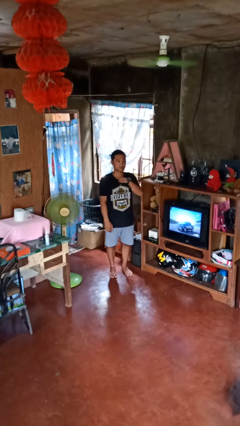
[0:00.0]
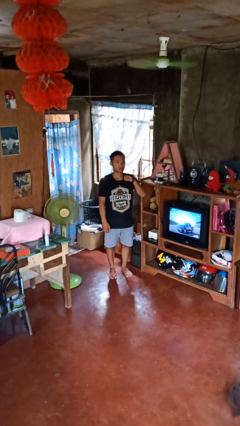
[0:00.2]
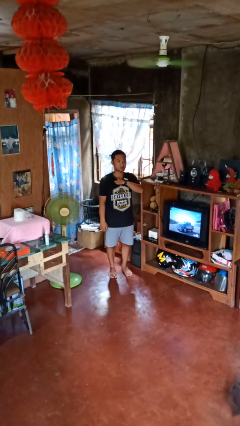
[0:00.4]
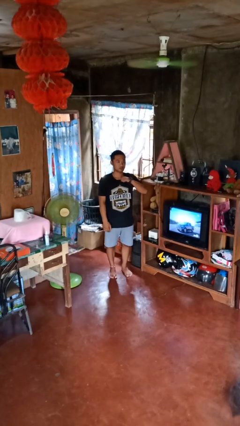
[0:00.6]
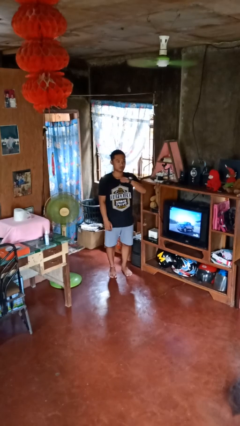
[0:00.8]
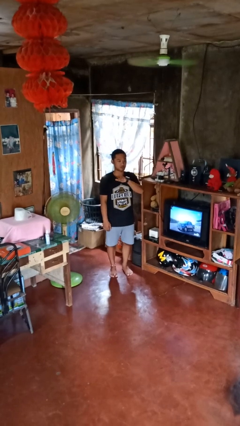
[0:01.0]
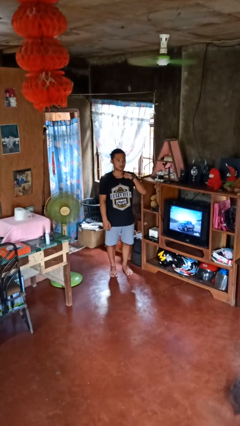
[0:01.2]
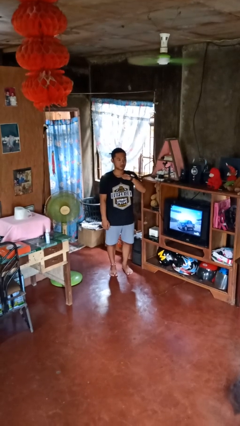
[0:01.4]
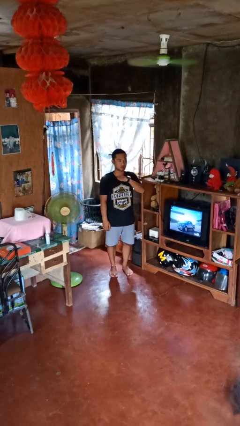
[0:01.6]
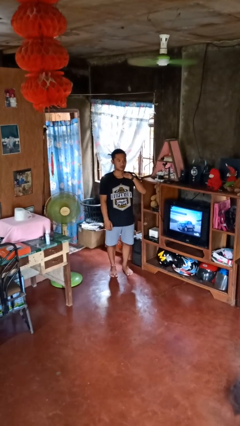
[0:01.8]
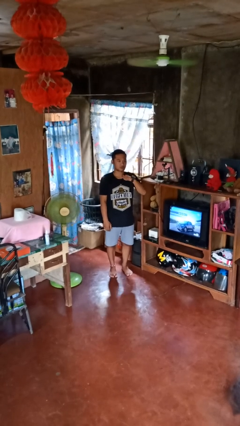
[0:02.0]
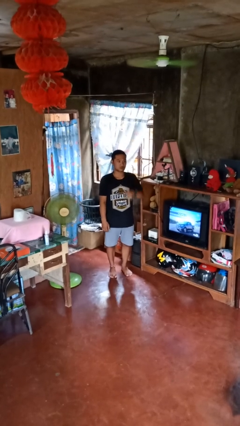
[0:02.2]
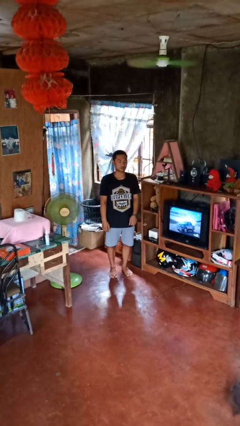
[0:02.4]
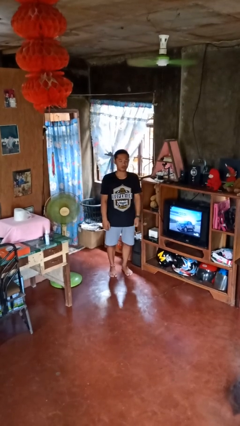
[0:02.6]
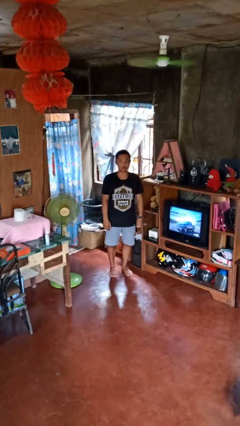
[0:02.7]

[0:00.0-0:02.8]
person gestures cut

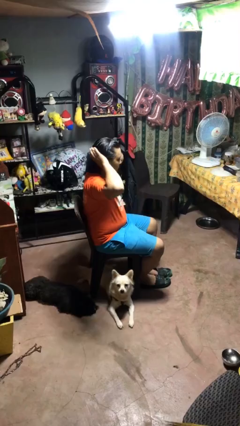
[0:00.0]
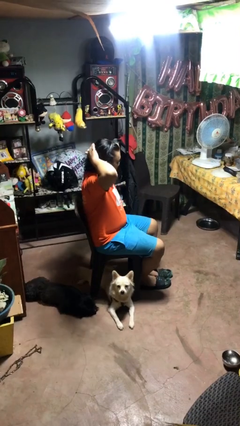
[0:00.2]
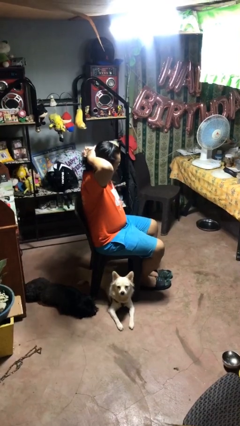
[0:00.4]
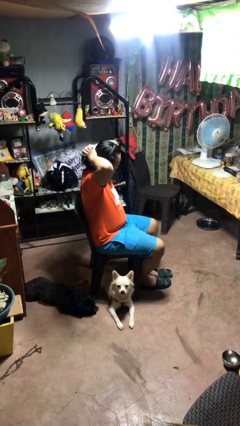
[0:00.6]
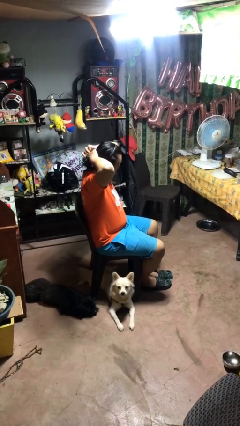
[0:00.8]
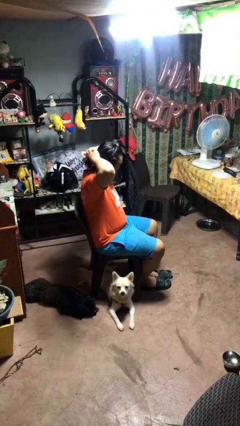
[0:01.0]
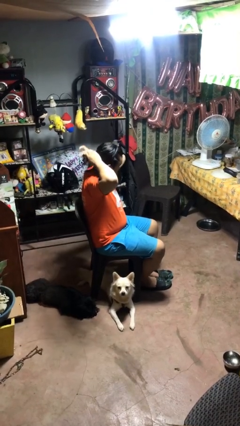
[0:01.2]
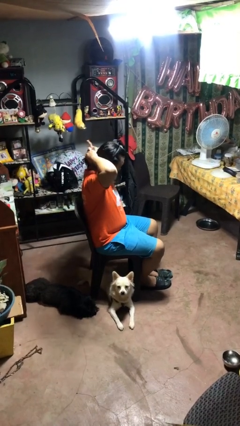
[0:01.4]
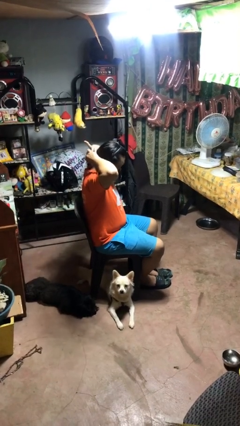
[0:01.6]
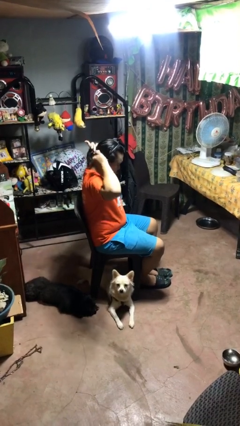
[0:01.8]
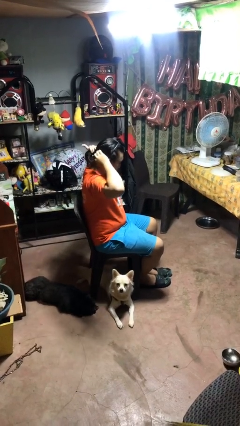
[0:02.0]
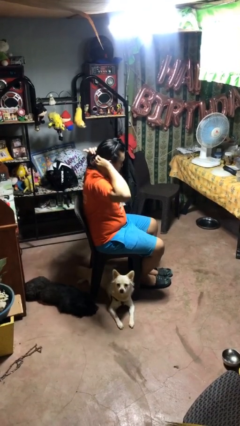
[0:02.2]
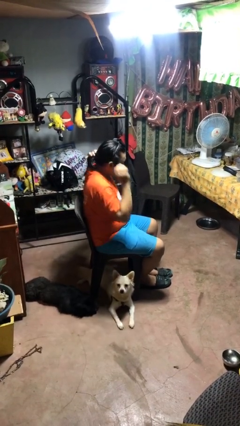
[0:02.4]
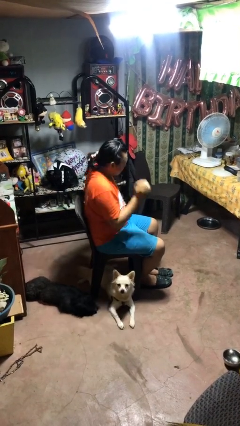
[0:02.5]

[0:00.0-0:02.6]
person puts hair in ponytail

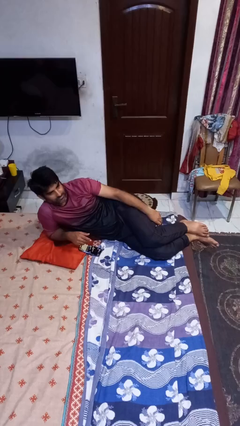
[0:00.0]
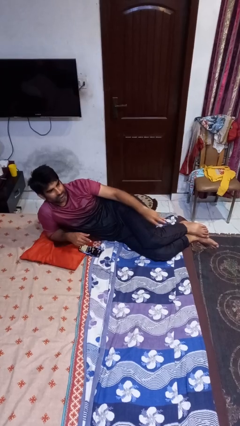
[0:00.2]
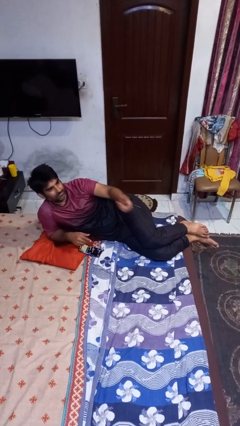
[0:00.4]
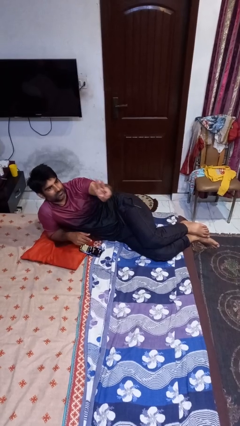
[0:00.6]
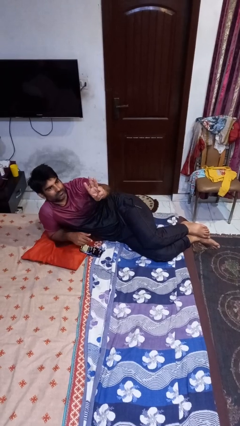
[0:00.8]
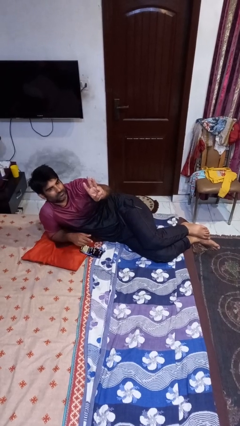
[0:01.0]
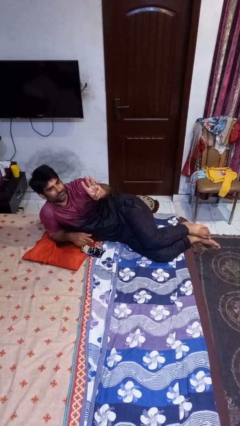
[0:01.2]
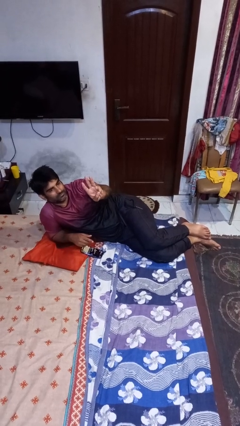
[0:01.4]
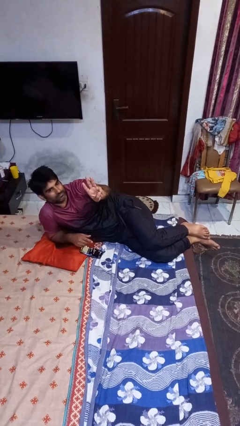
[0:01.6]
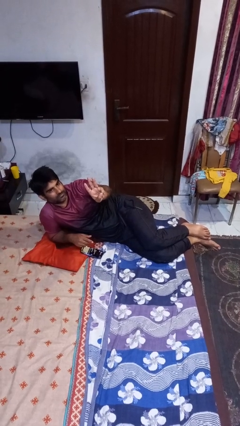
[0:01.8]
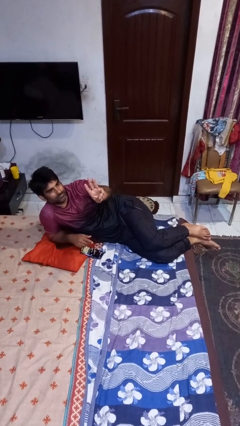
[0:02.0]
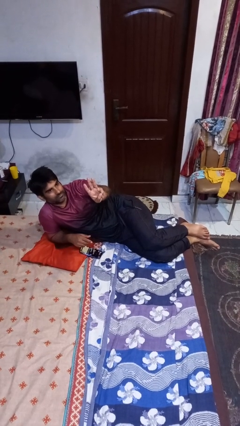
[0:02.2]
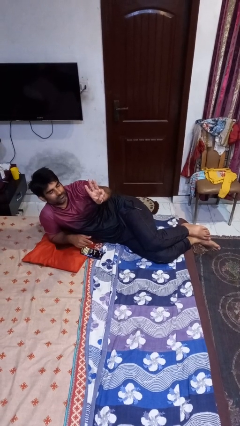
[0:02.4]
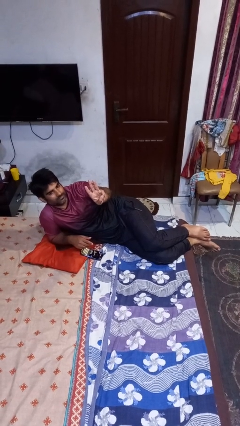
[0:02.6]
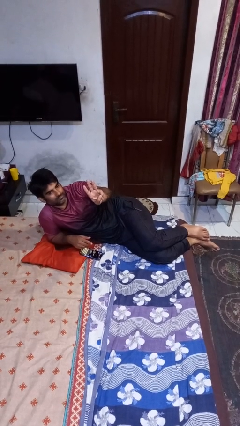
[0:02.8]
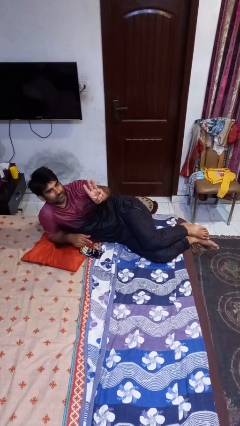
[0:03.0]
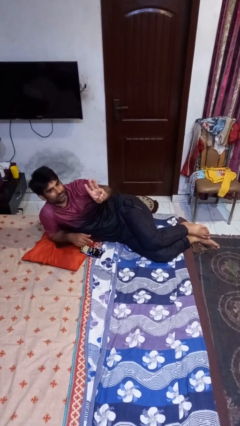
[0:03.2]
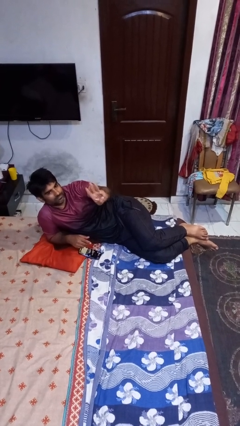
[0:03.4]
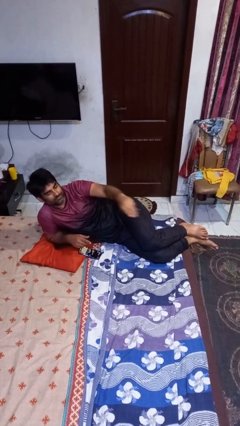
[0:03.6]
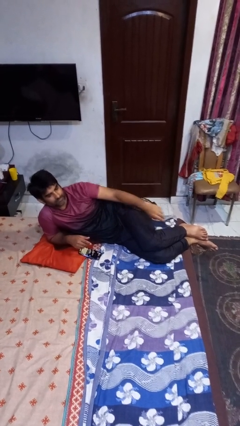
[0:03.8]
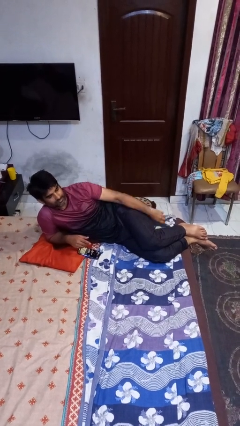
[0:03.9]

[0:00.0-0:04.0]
person gestures number three

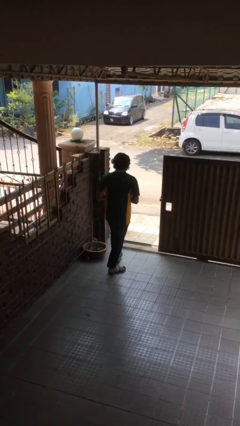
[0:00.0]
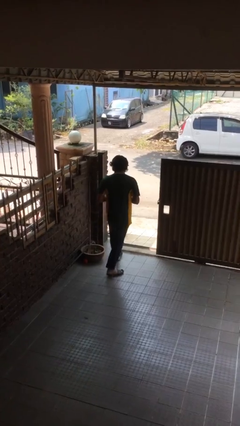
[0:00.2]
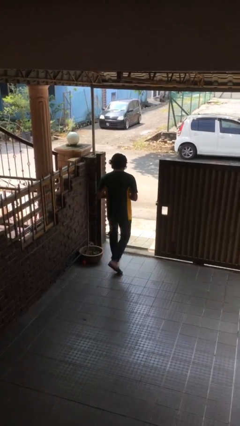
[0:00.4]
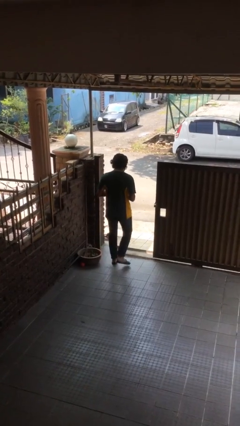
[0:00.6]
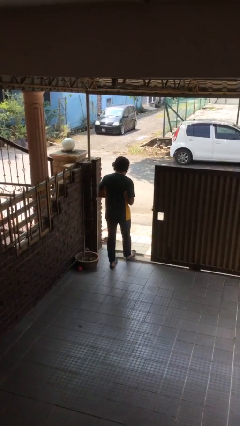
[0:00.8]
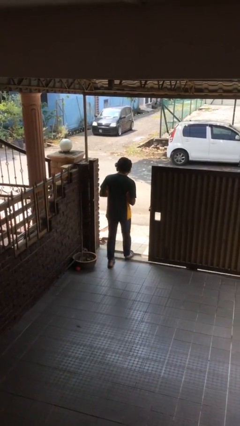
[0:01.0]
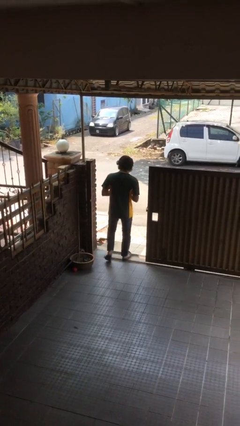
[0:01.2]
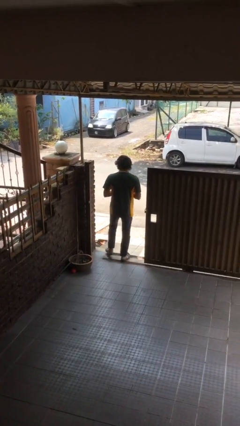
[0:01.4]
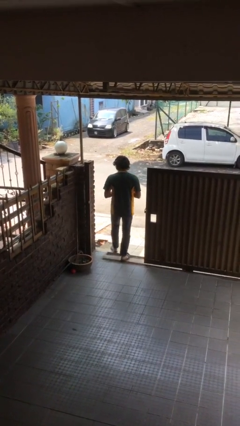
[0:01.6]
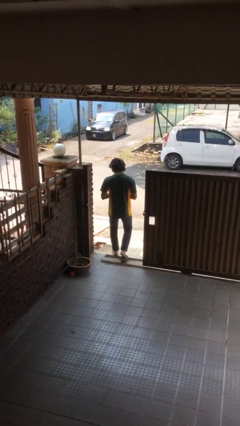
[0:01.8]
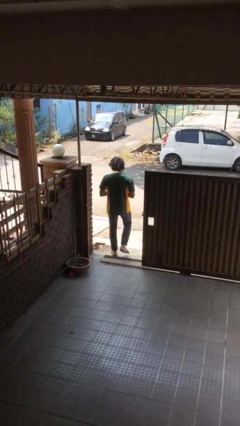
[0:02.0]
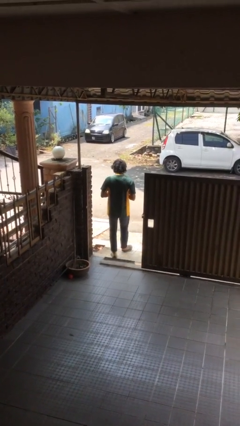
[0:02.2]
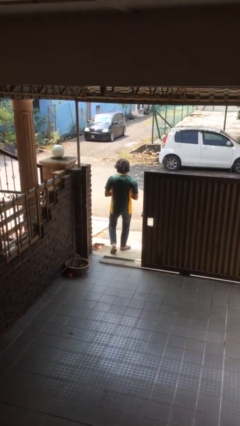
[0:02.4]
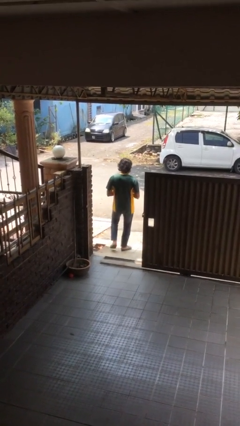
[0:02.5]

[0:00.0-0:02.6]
person exits scene through structure

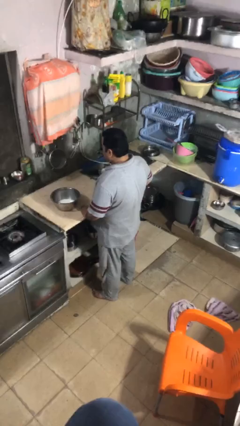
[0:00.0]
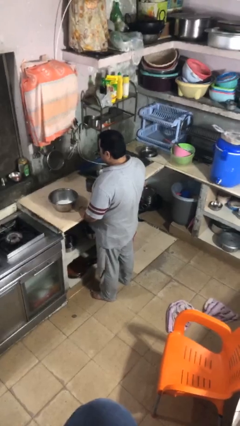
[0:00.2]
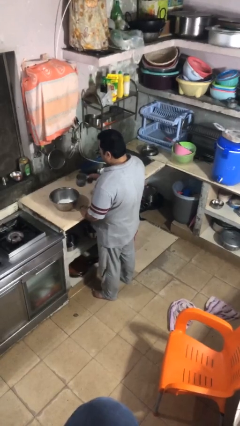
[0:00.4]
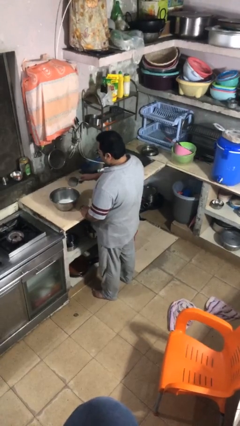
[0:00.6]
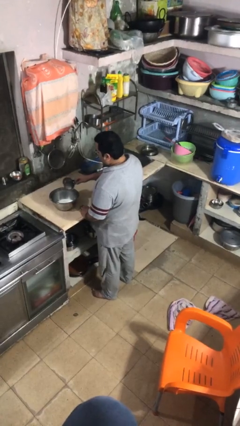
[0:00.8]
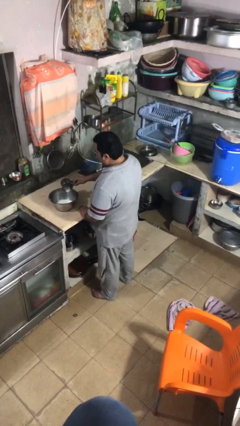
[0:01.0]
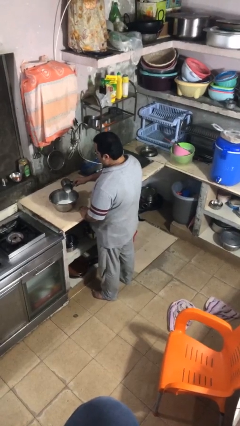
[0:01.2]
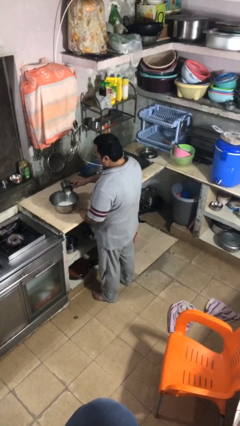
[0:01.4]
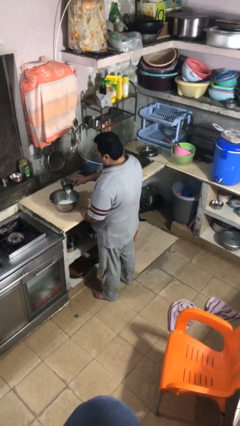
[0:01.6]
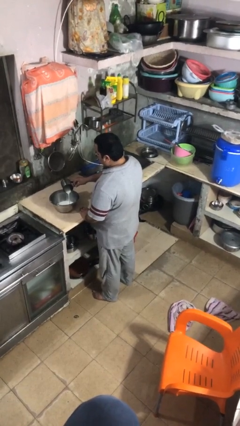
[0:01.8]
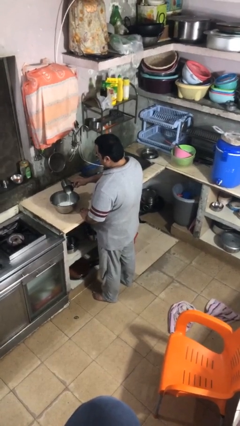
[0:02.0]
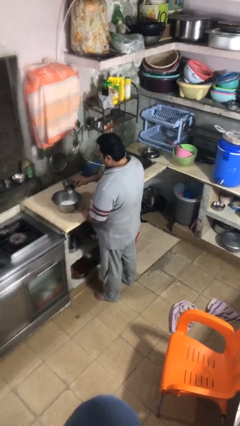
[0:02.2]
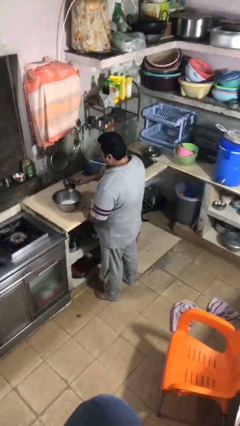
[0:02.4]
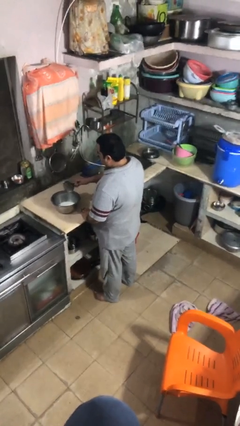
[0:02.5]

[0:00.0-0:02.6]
person pours into bowl

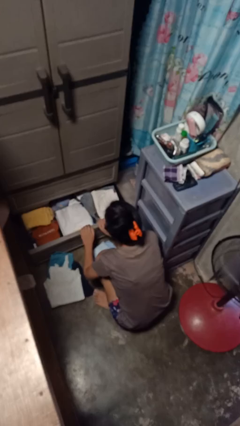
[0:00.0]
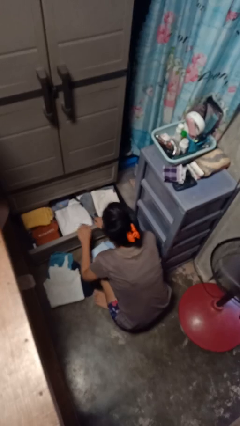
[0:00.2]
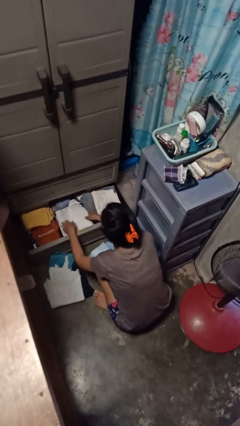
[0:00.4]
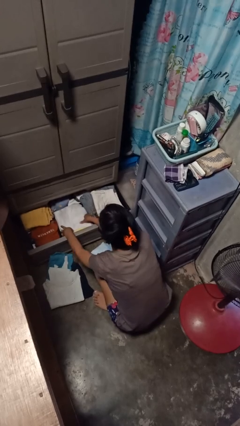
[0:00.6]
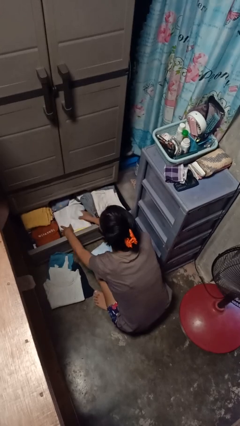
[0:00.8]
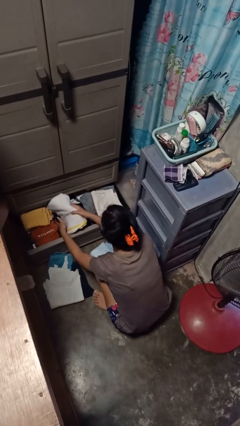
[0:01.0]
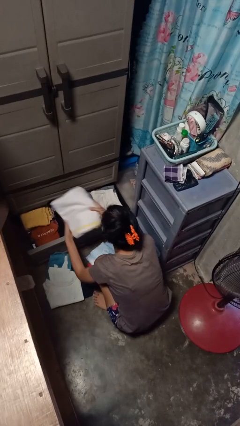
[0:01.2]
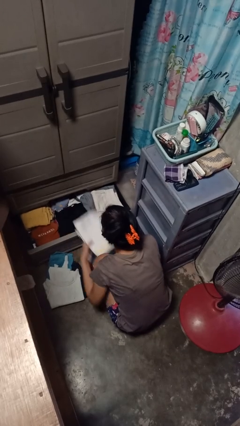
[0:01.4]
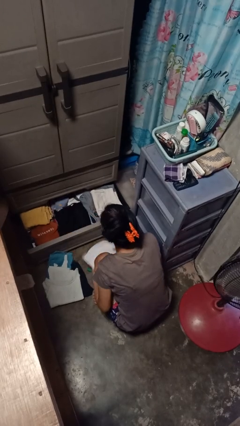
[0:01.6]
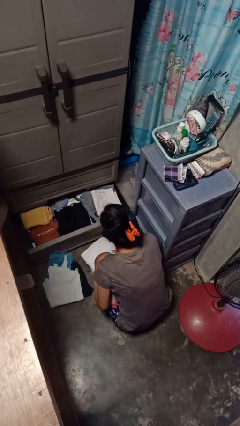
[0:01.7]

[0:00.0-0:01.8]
person takes clothes from dresser

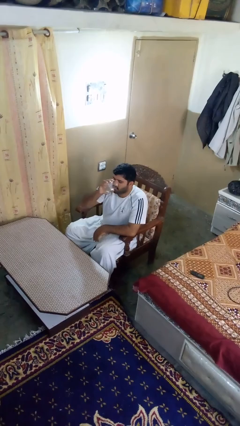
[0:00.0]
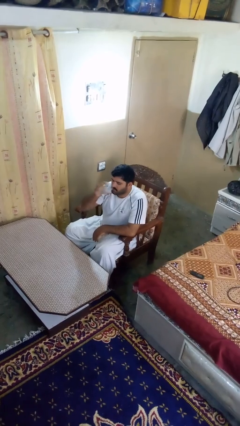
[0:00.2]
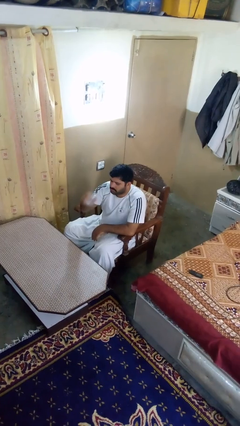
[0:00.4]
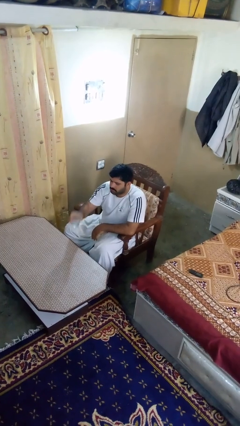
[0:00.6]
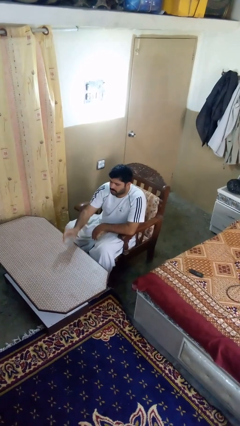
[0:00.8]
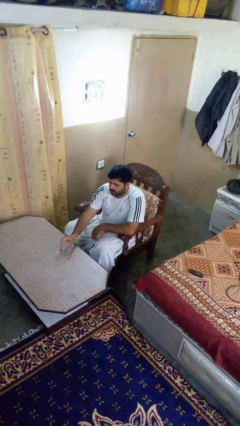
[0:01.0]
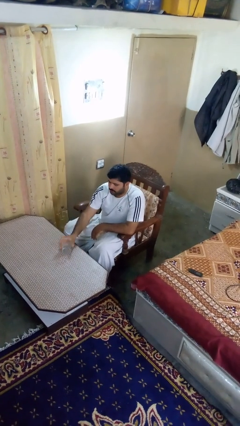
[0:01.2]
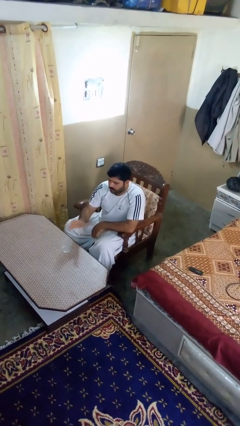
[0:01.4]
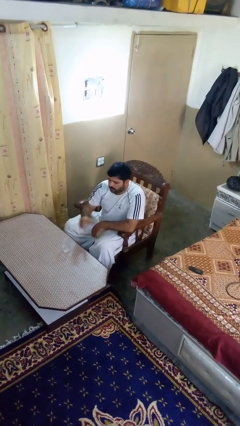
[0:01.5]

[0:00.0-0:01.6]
person puts down object on table
